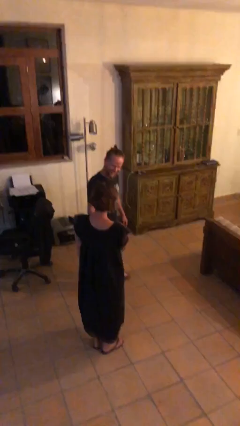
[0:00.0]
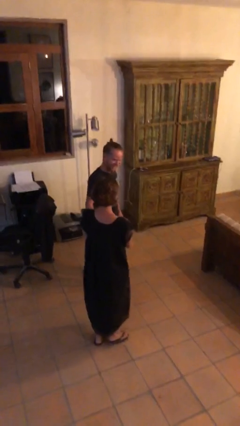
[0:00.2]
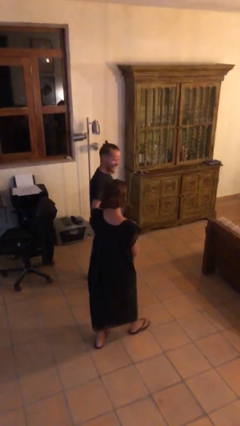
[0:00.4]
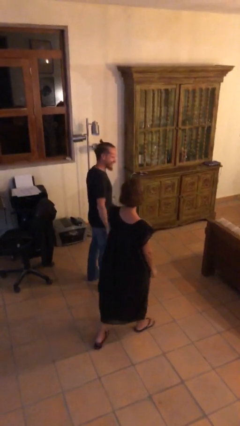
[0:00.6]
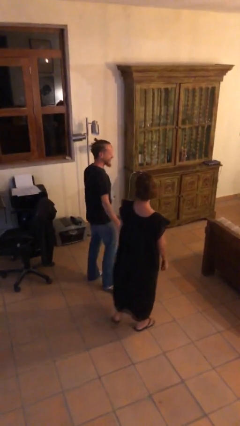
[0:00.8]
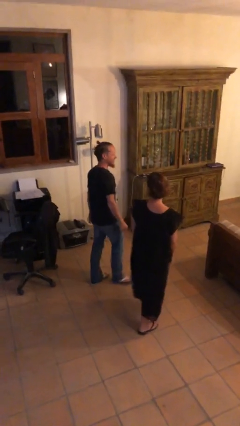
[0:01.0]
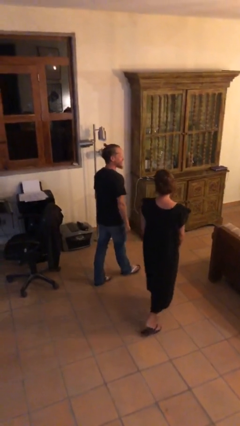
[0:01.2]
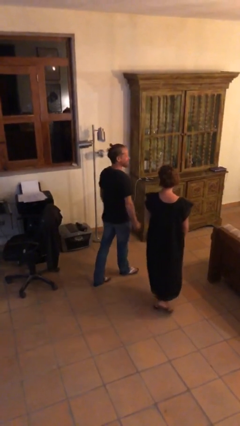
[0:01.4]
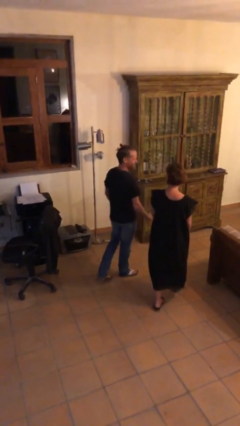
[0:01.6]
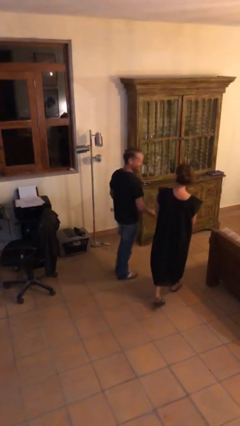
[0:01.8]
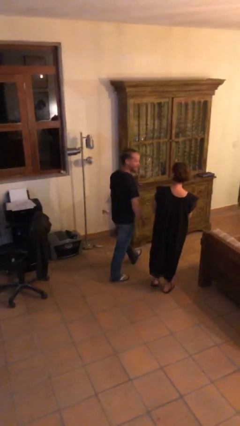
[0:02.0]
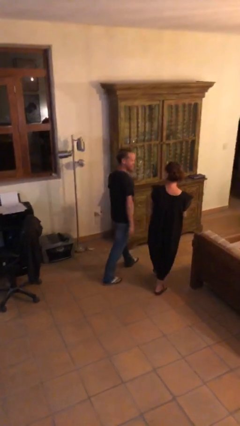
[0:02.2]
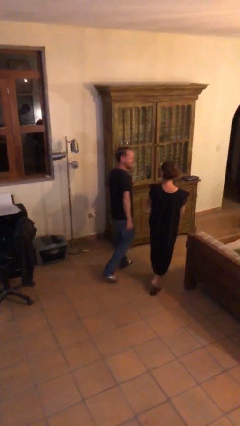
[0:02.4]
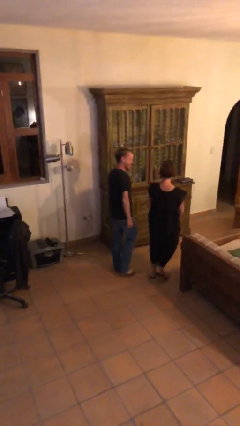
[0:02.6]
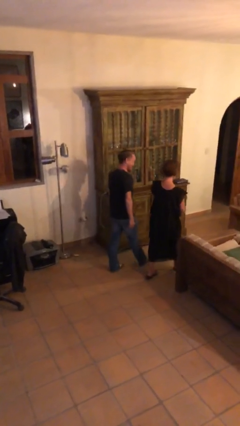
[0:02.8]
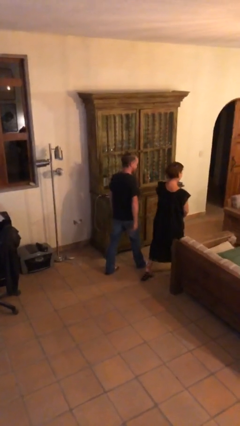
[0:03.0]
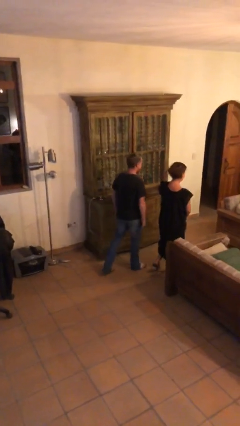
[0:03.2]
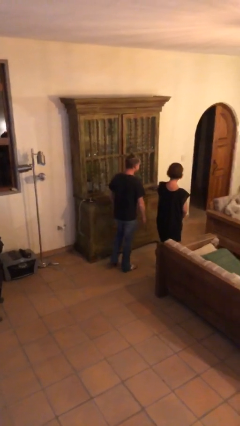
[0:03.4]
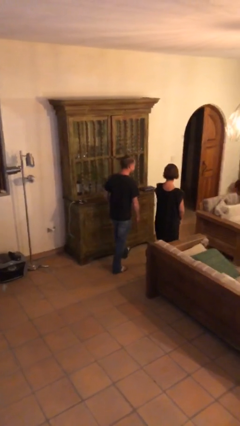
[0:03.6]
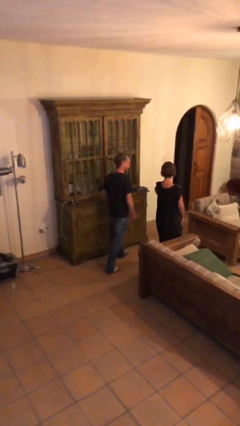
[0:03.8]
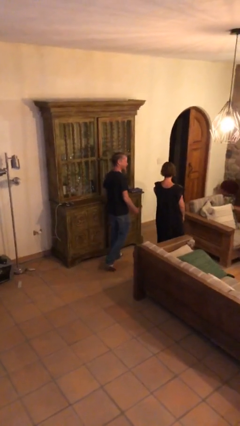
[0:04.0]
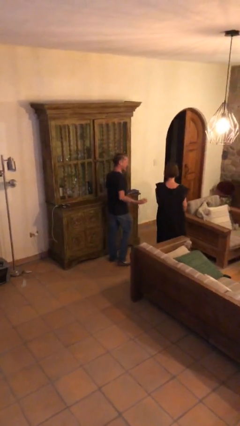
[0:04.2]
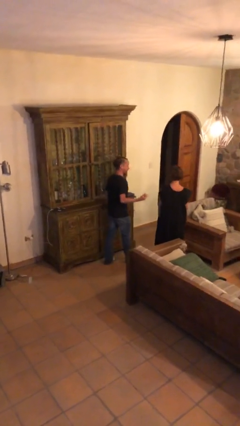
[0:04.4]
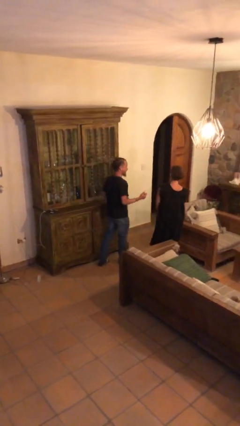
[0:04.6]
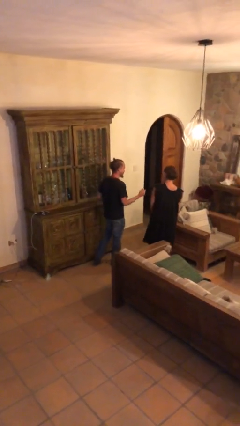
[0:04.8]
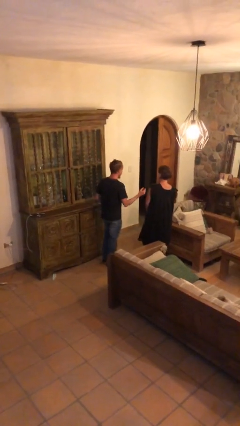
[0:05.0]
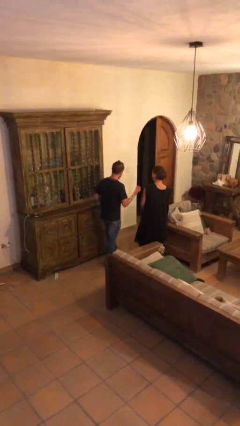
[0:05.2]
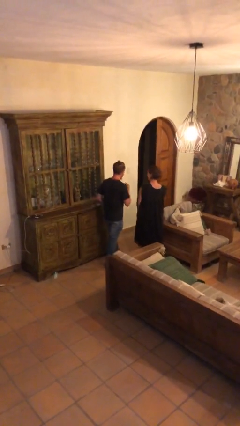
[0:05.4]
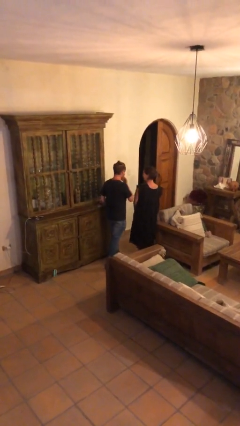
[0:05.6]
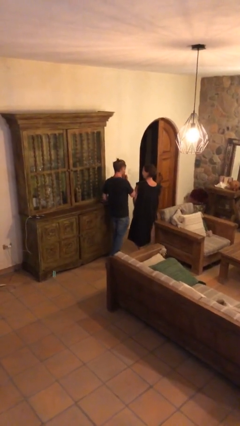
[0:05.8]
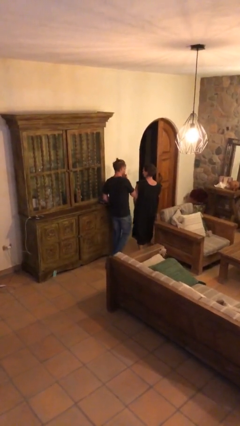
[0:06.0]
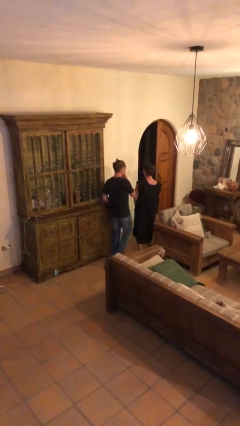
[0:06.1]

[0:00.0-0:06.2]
person talks to person

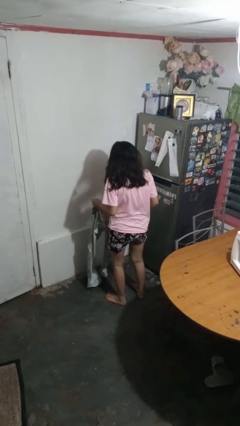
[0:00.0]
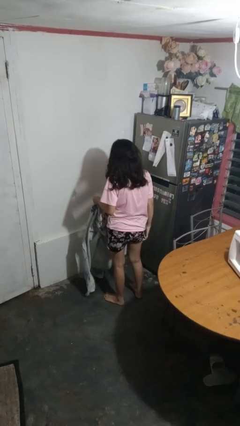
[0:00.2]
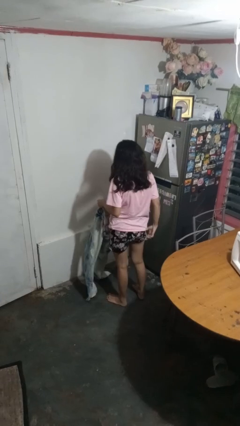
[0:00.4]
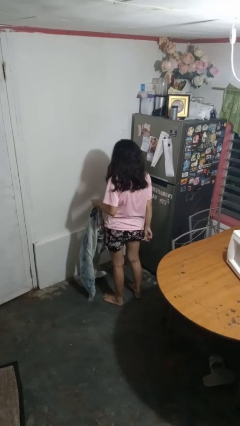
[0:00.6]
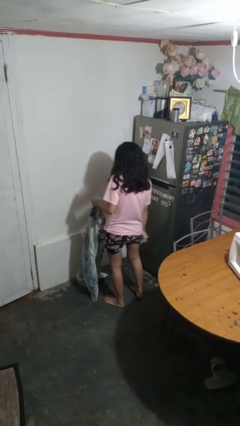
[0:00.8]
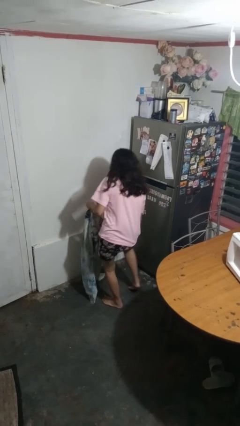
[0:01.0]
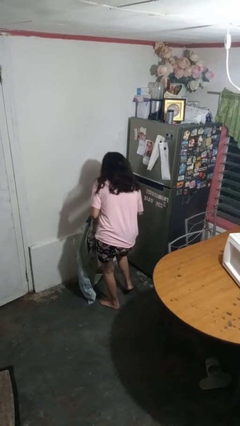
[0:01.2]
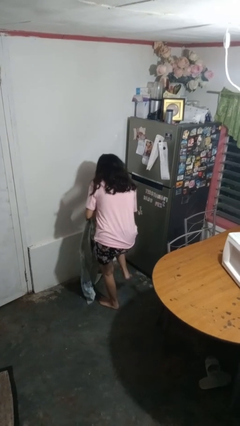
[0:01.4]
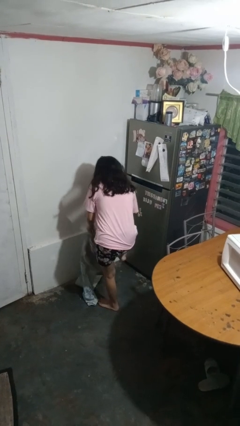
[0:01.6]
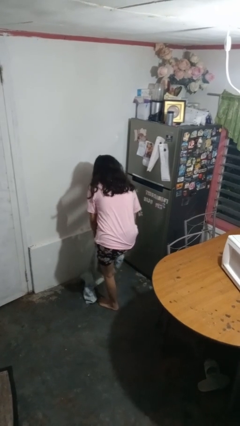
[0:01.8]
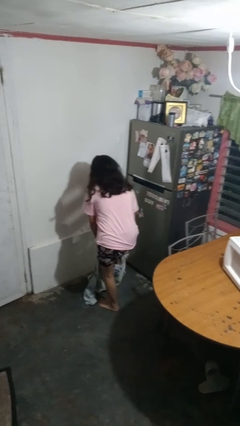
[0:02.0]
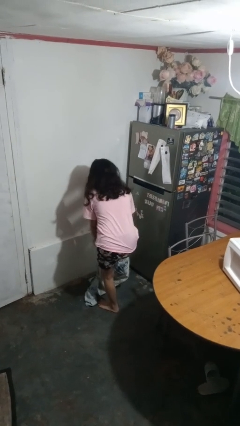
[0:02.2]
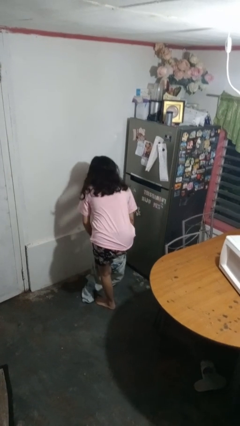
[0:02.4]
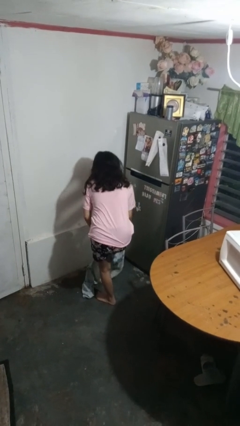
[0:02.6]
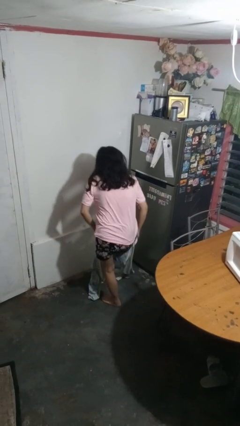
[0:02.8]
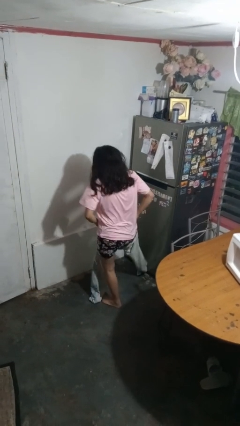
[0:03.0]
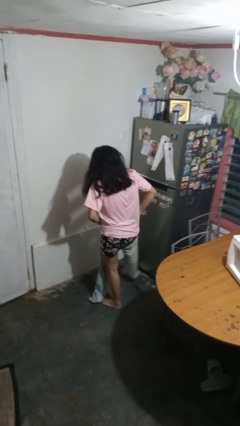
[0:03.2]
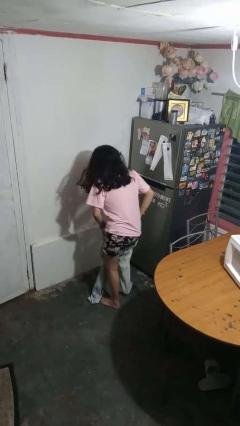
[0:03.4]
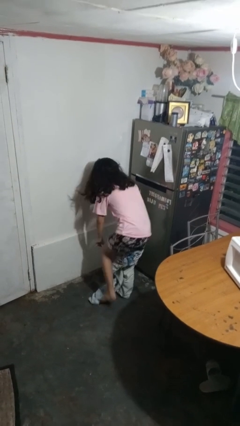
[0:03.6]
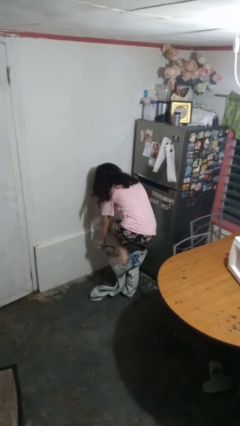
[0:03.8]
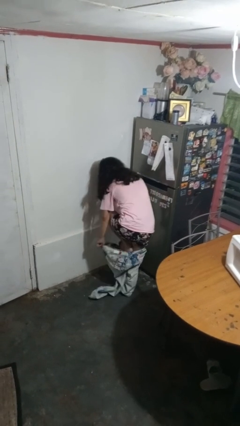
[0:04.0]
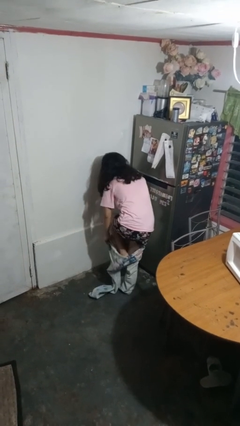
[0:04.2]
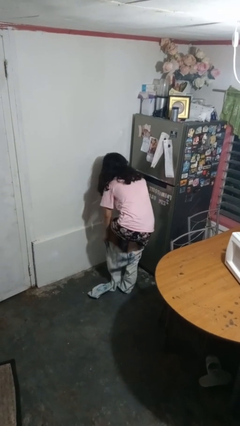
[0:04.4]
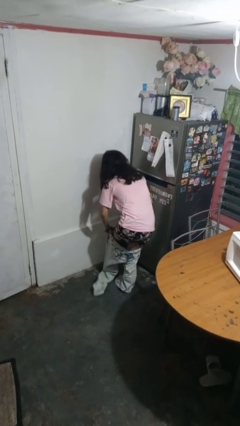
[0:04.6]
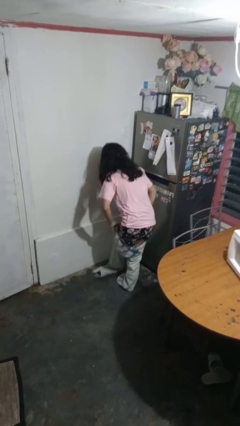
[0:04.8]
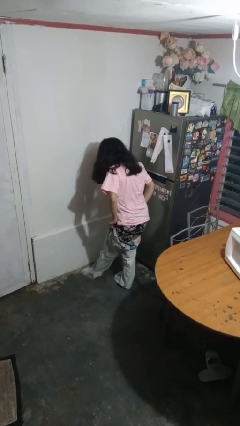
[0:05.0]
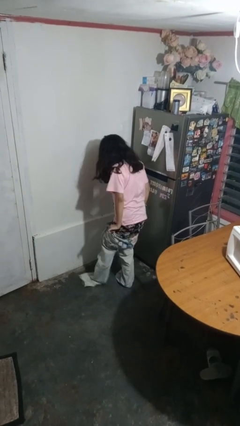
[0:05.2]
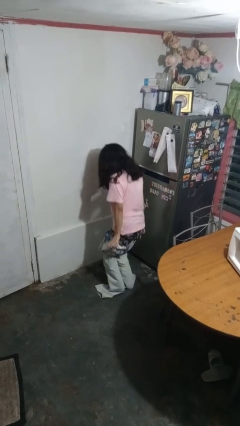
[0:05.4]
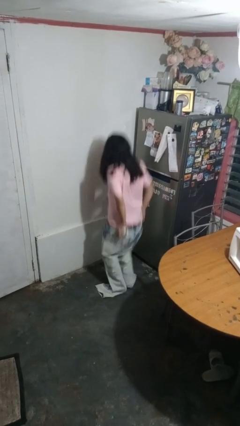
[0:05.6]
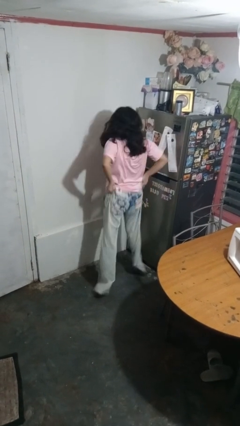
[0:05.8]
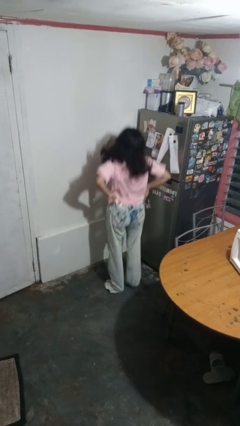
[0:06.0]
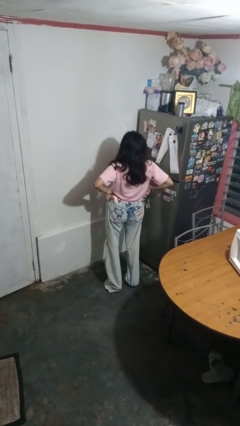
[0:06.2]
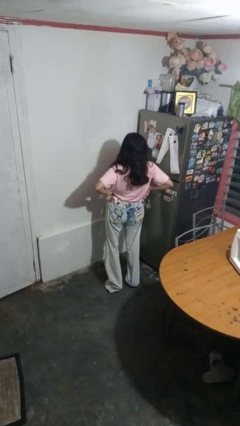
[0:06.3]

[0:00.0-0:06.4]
person puts on pants

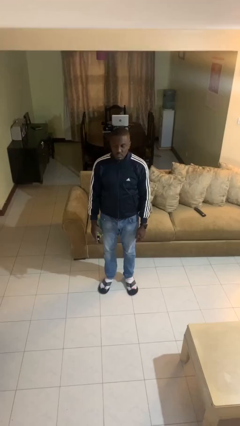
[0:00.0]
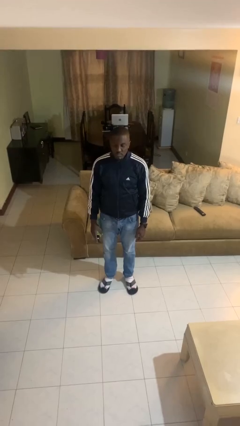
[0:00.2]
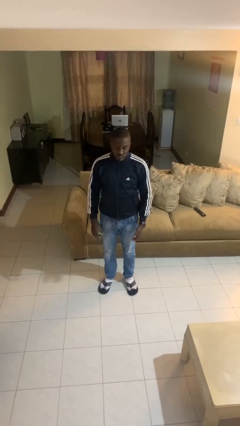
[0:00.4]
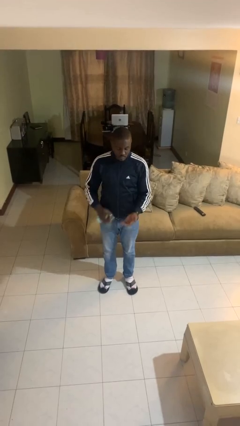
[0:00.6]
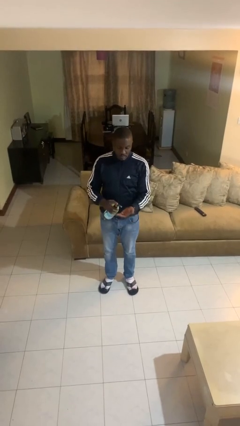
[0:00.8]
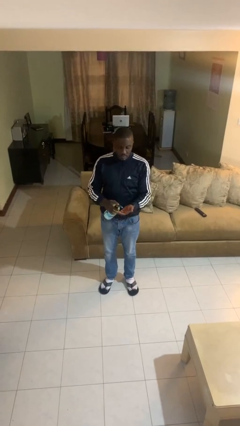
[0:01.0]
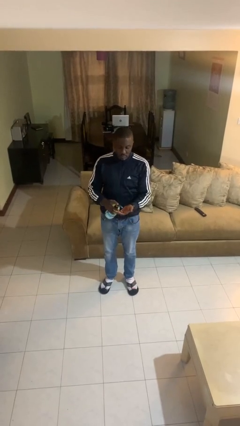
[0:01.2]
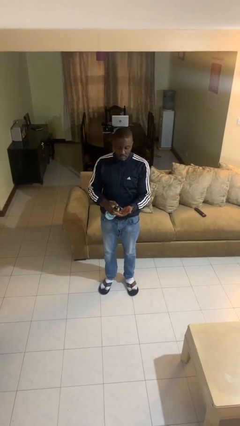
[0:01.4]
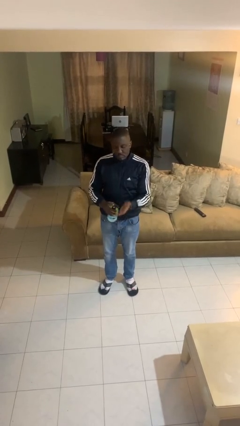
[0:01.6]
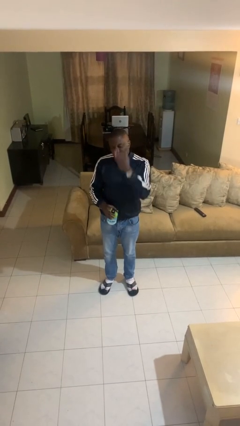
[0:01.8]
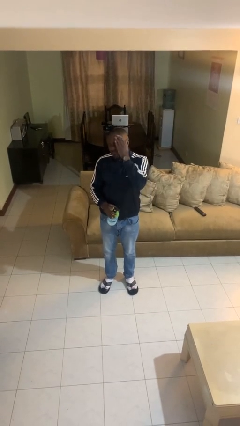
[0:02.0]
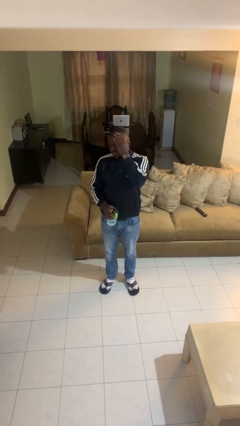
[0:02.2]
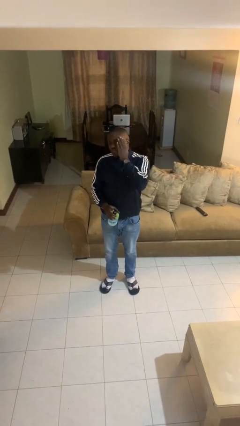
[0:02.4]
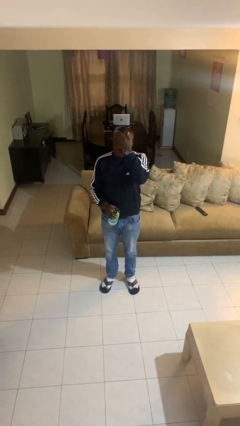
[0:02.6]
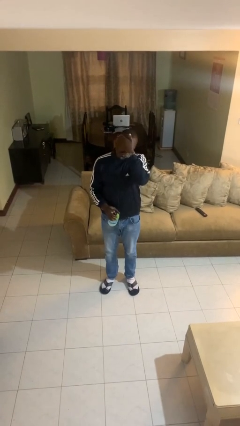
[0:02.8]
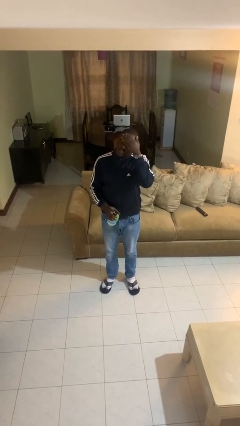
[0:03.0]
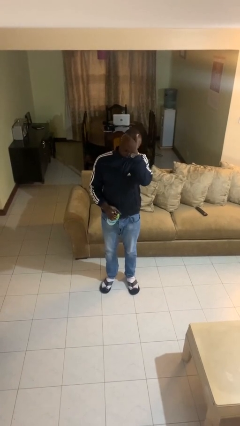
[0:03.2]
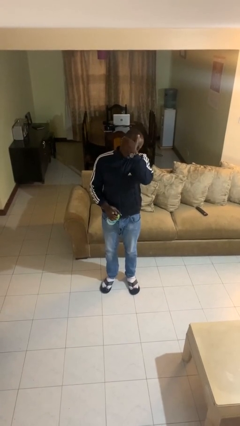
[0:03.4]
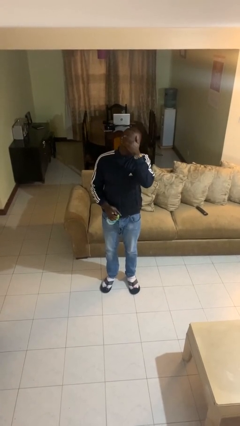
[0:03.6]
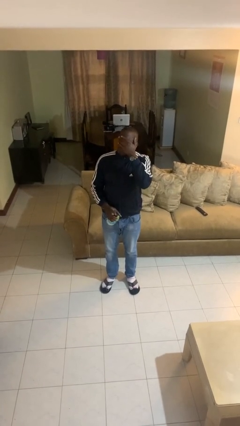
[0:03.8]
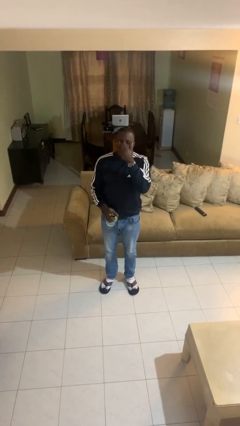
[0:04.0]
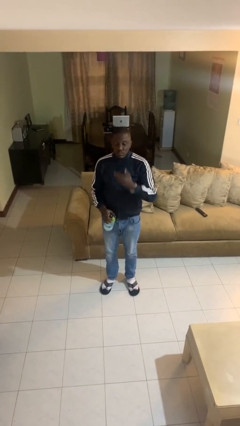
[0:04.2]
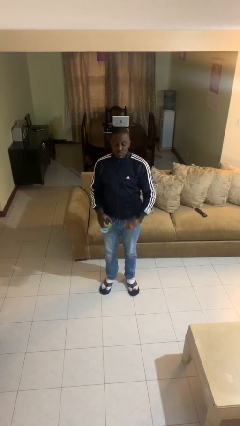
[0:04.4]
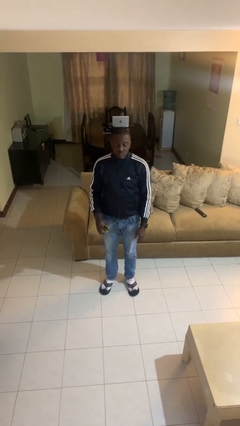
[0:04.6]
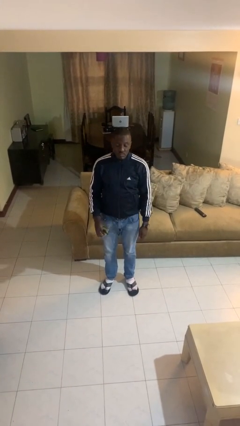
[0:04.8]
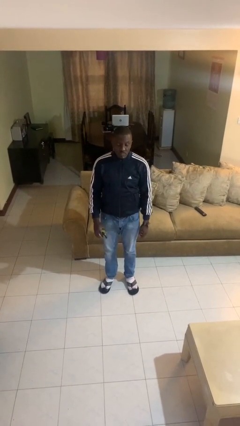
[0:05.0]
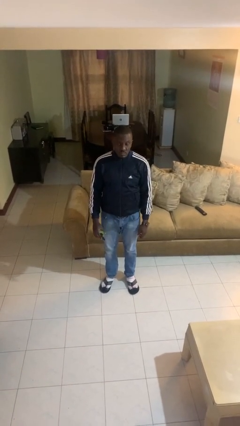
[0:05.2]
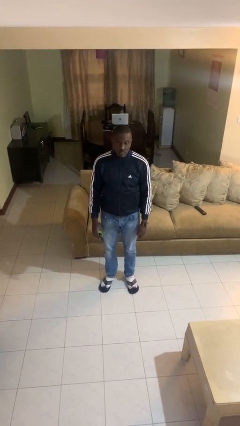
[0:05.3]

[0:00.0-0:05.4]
person applies facial moisturizer
